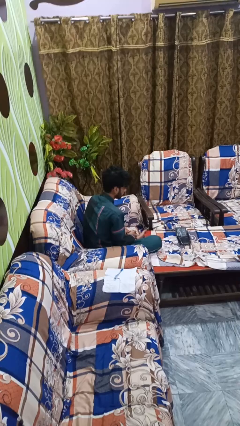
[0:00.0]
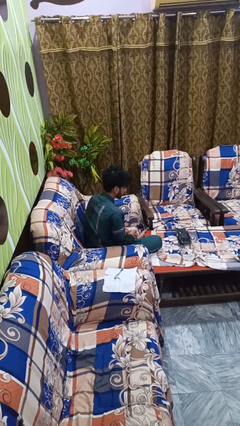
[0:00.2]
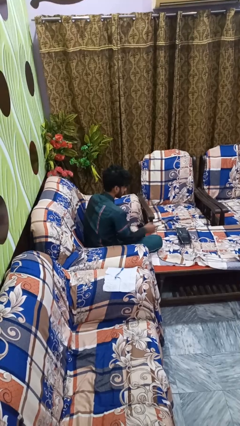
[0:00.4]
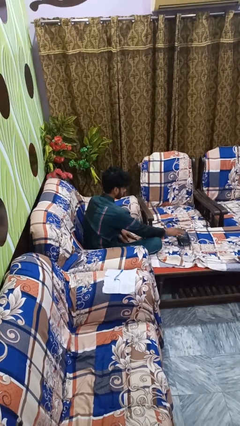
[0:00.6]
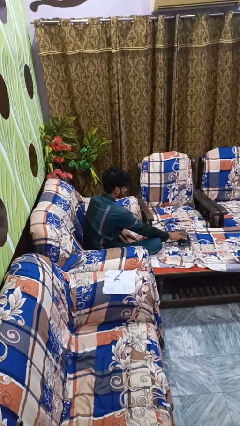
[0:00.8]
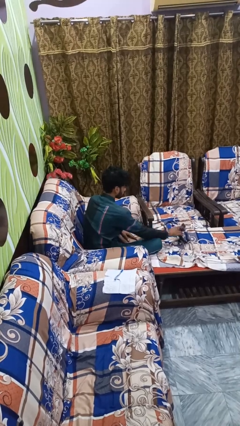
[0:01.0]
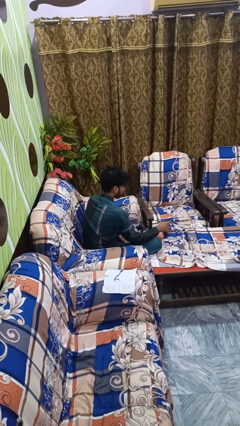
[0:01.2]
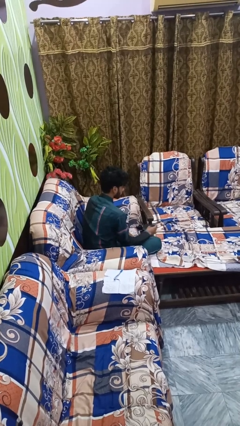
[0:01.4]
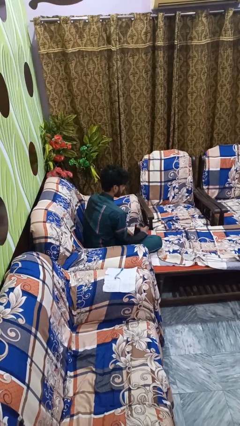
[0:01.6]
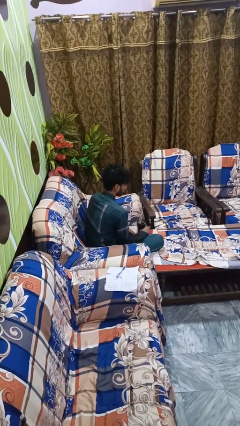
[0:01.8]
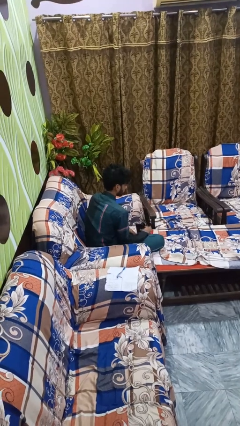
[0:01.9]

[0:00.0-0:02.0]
person picks up object from floor

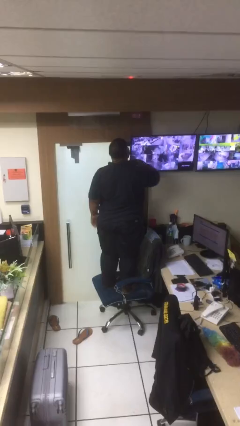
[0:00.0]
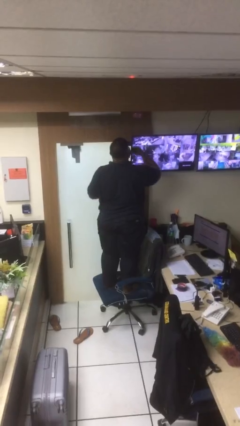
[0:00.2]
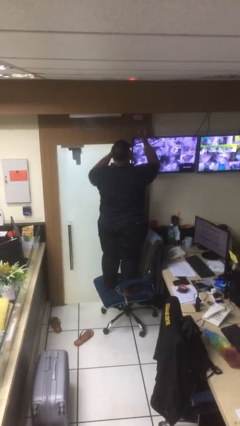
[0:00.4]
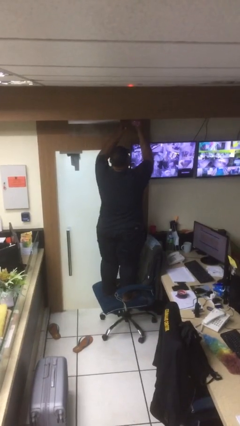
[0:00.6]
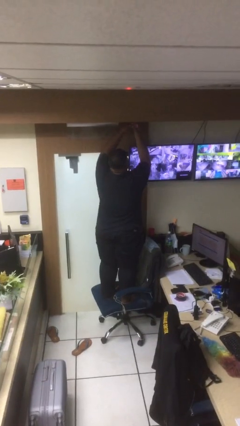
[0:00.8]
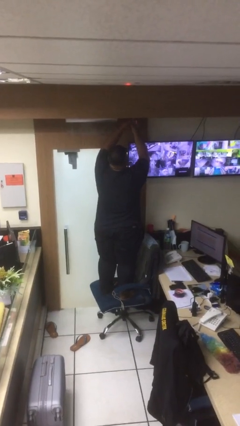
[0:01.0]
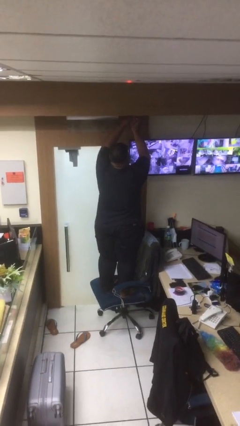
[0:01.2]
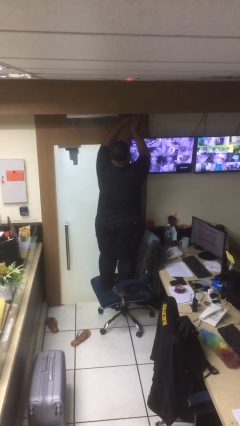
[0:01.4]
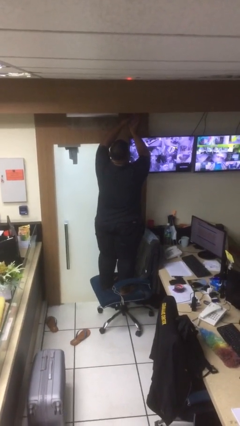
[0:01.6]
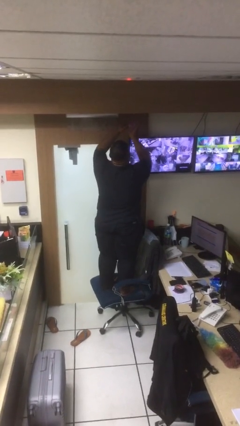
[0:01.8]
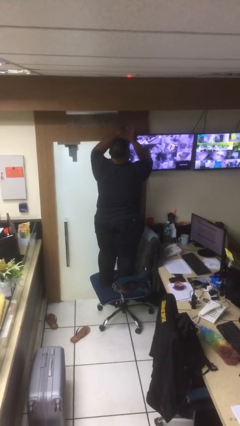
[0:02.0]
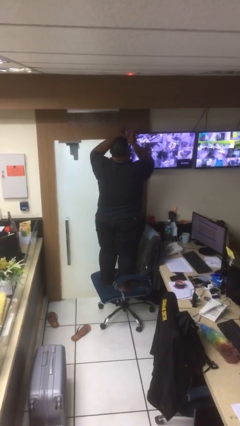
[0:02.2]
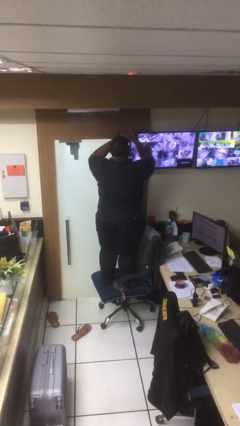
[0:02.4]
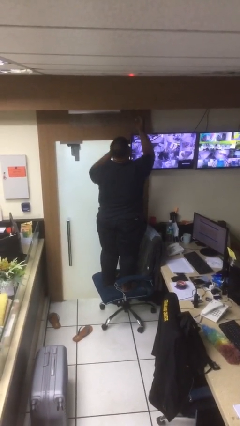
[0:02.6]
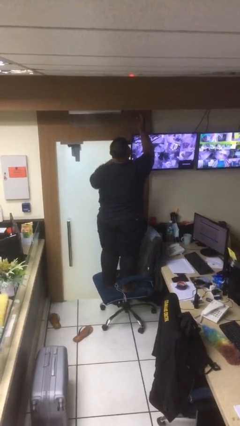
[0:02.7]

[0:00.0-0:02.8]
person takes down smoke detector

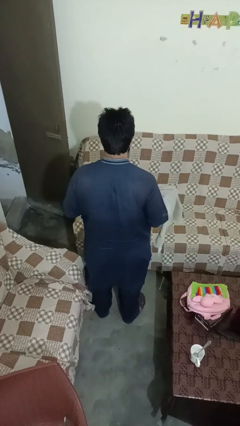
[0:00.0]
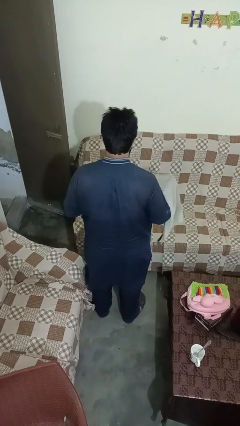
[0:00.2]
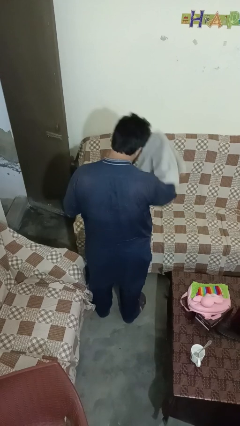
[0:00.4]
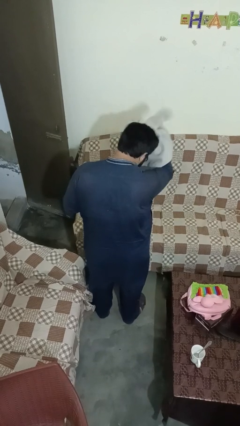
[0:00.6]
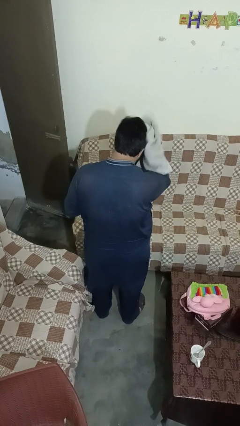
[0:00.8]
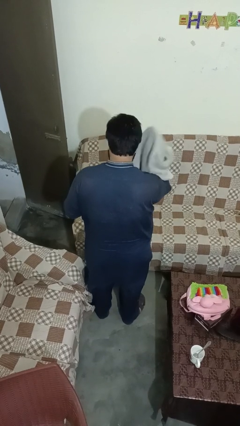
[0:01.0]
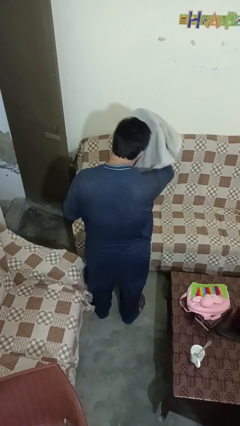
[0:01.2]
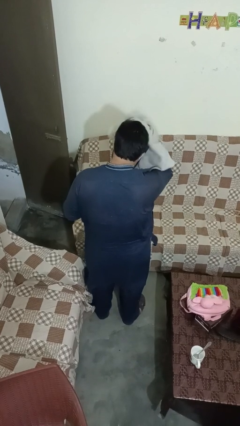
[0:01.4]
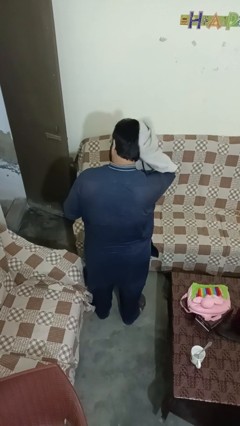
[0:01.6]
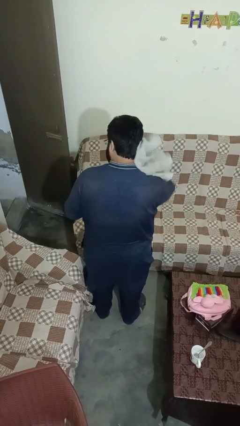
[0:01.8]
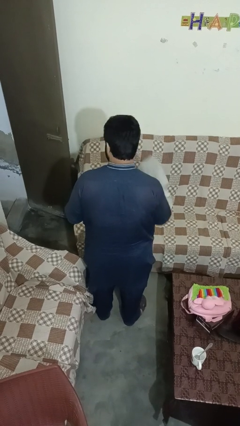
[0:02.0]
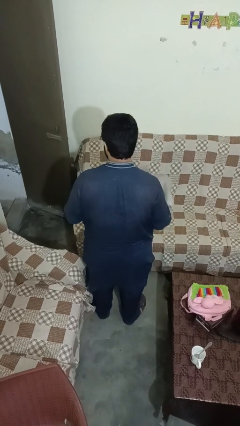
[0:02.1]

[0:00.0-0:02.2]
person dries hair with towel

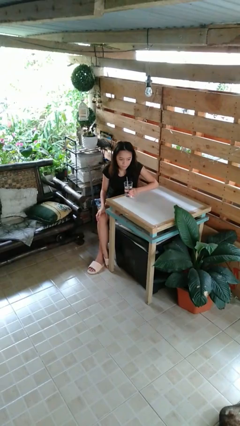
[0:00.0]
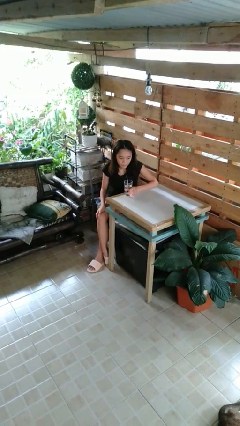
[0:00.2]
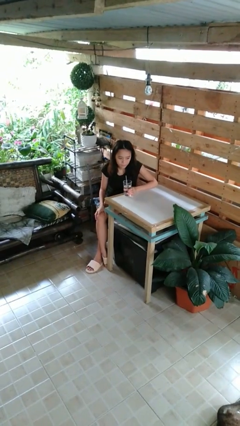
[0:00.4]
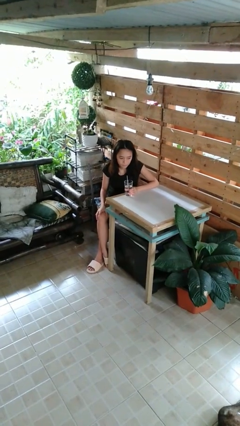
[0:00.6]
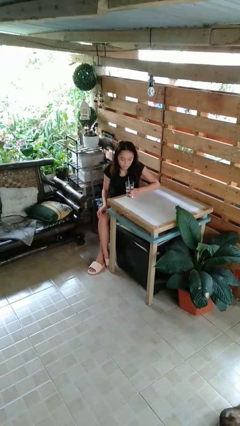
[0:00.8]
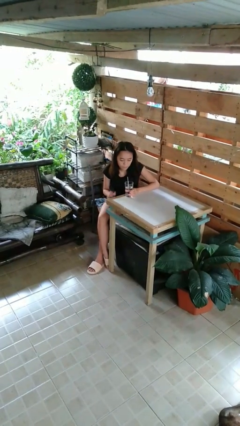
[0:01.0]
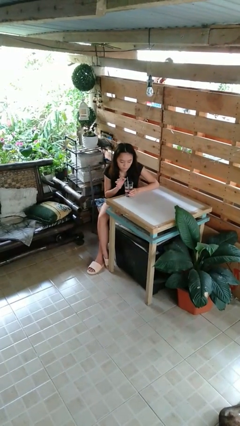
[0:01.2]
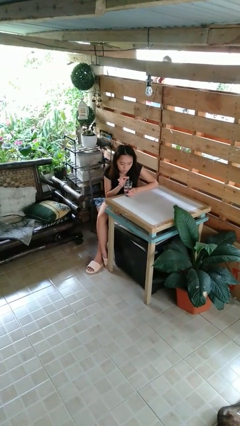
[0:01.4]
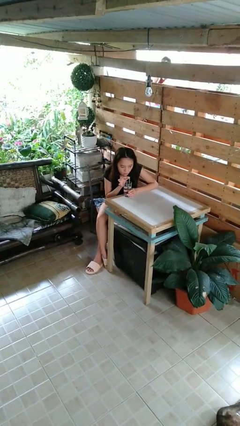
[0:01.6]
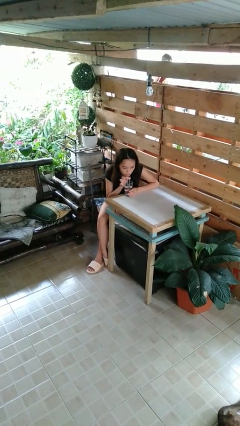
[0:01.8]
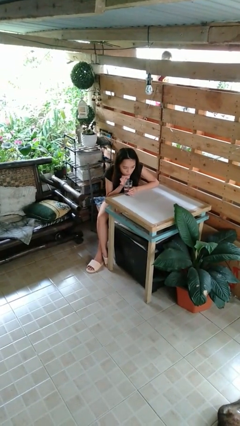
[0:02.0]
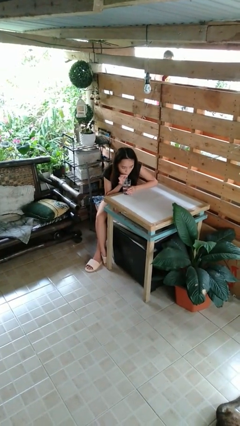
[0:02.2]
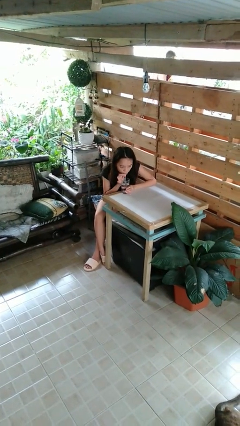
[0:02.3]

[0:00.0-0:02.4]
person drinks from straw

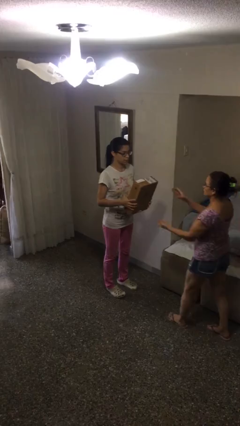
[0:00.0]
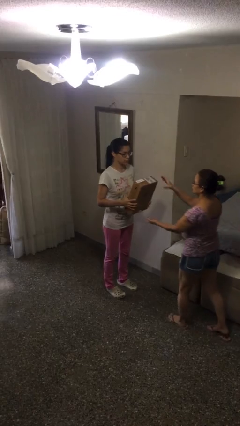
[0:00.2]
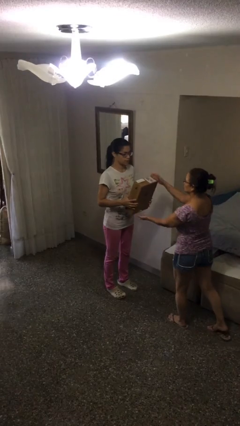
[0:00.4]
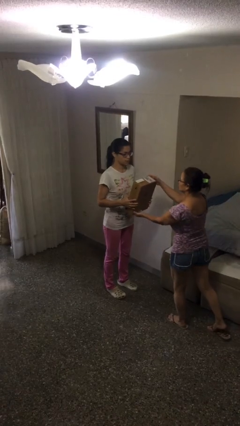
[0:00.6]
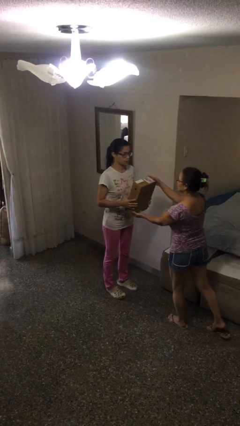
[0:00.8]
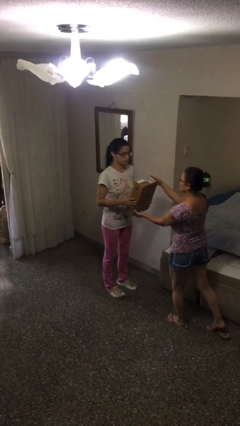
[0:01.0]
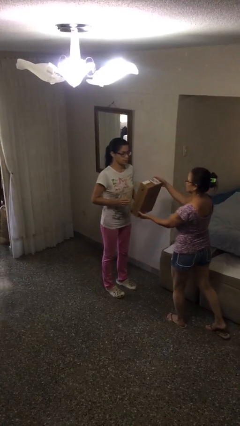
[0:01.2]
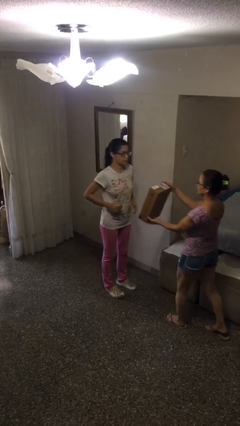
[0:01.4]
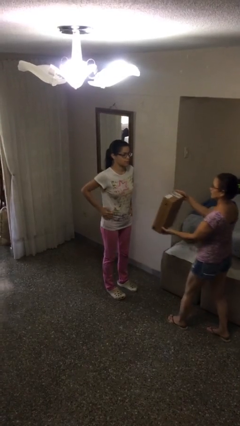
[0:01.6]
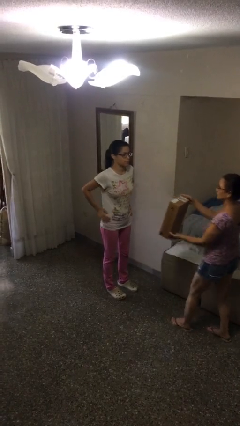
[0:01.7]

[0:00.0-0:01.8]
person transfers object to person

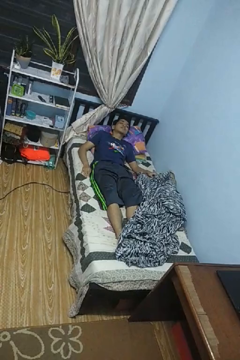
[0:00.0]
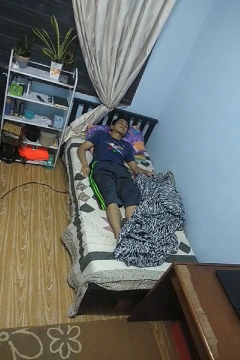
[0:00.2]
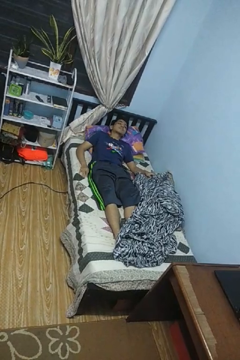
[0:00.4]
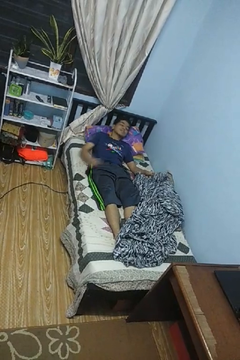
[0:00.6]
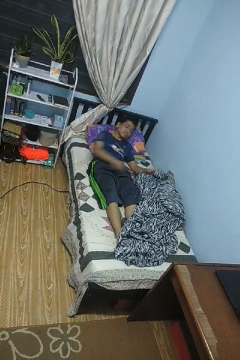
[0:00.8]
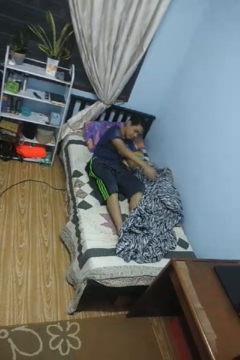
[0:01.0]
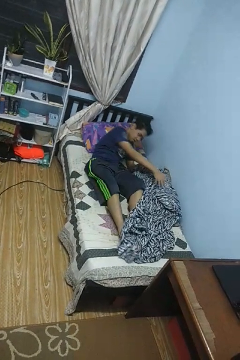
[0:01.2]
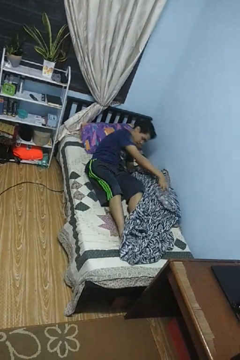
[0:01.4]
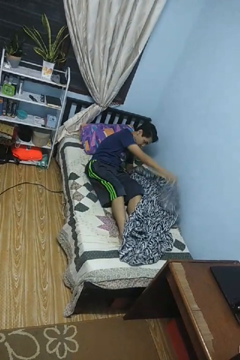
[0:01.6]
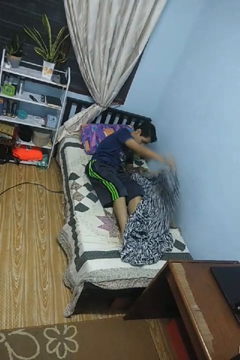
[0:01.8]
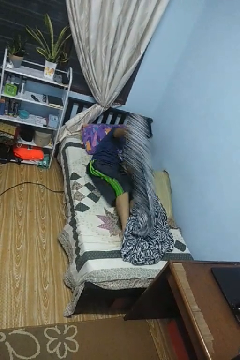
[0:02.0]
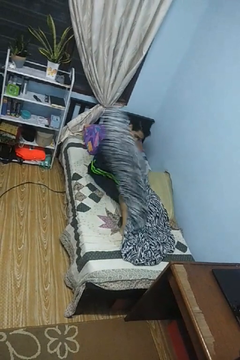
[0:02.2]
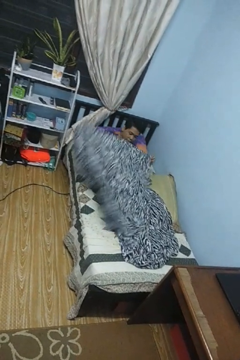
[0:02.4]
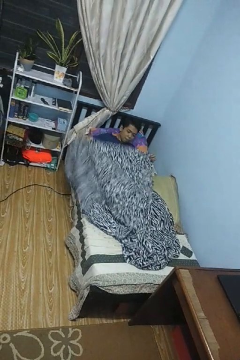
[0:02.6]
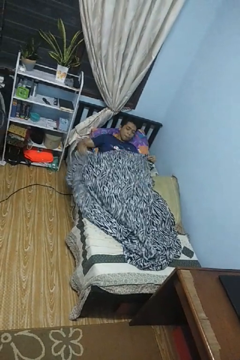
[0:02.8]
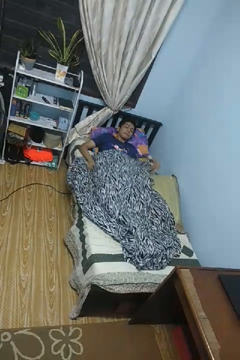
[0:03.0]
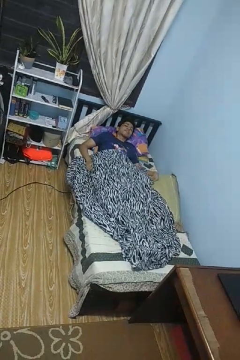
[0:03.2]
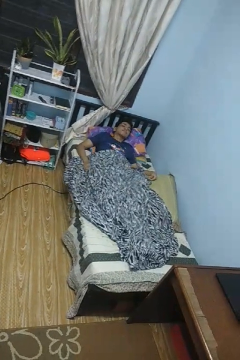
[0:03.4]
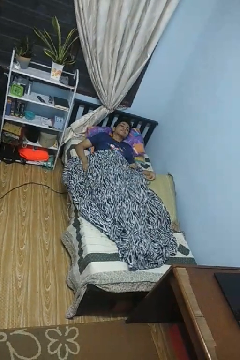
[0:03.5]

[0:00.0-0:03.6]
person covers with blanket

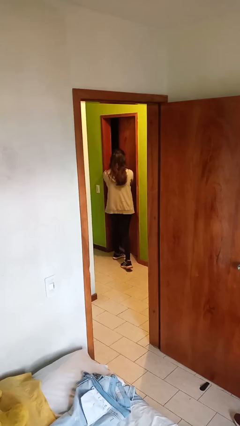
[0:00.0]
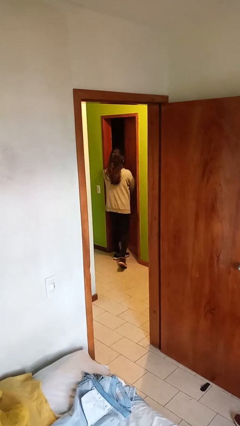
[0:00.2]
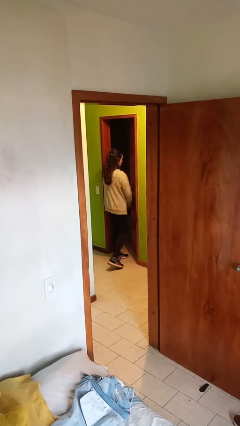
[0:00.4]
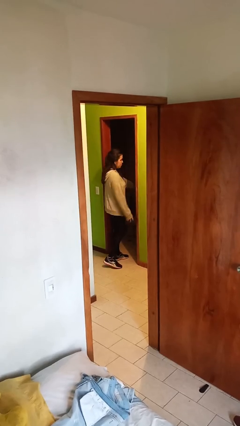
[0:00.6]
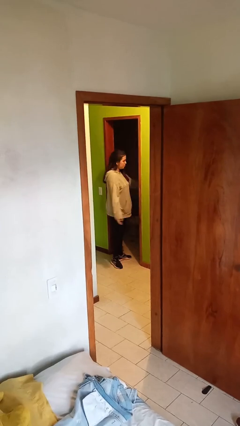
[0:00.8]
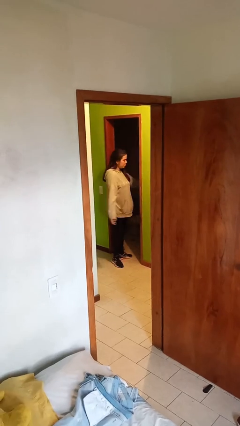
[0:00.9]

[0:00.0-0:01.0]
person opens facility door

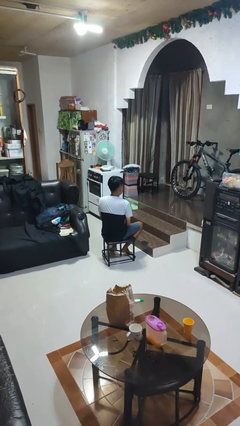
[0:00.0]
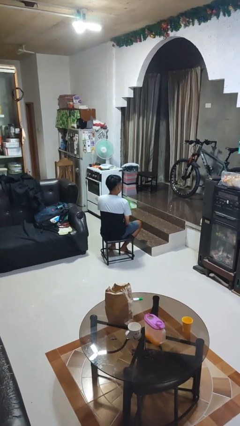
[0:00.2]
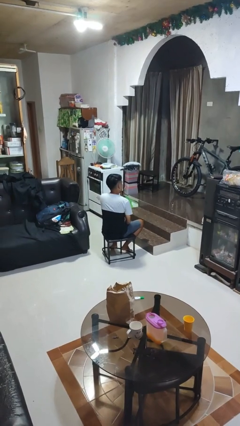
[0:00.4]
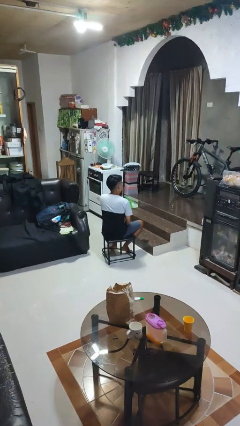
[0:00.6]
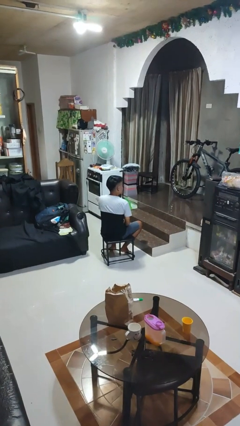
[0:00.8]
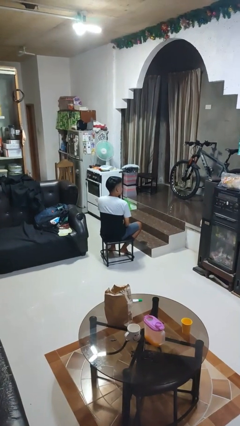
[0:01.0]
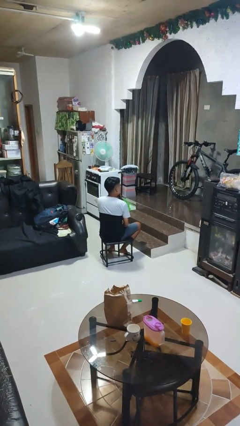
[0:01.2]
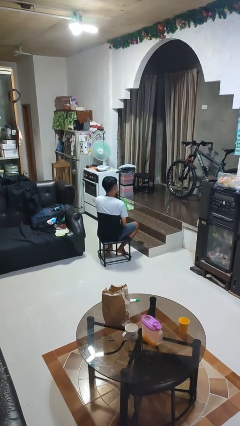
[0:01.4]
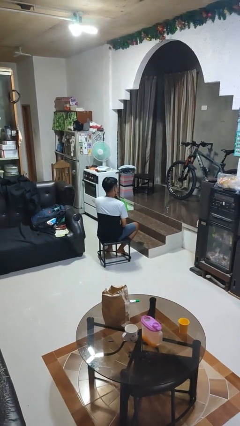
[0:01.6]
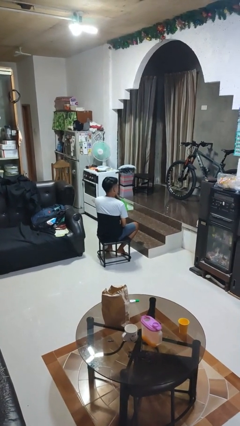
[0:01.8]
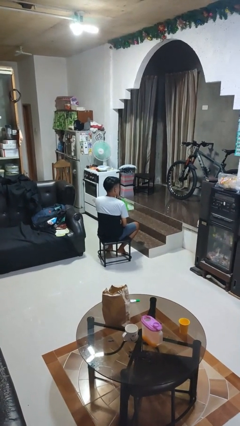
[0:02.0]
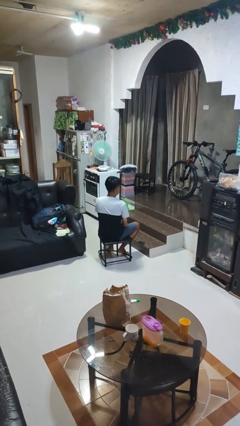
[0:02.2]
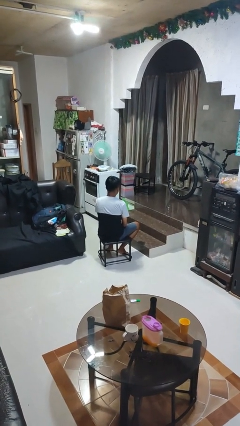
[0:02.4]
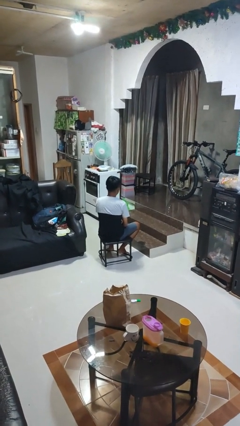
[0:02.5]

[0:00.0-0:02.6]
person strokes chin
